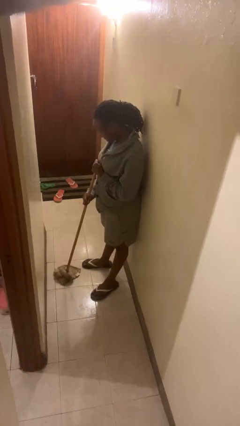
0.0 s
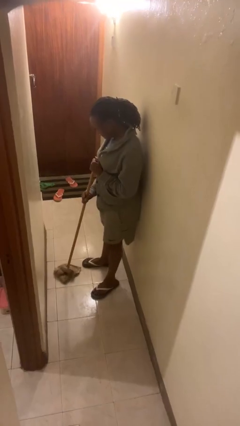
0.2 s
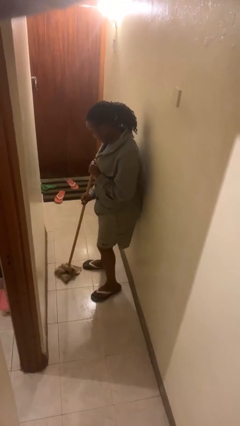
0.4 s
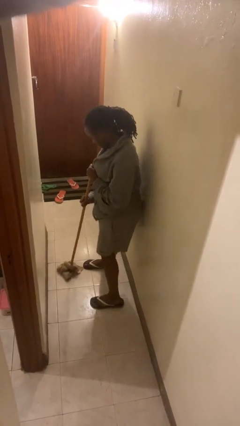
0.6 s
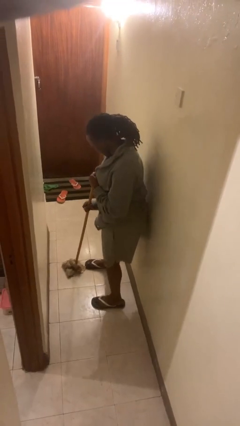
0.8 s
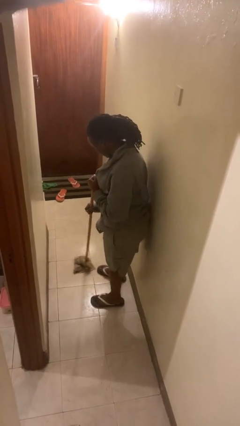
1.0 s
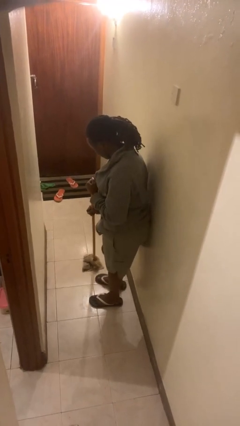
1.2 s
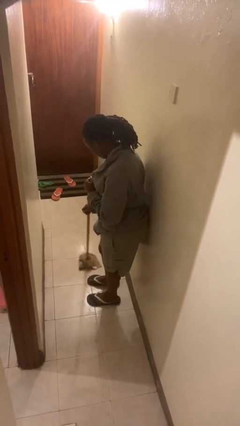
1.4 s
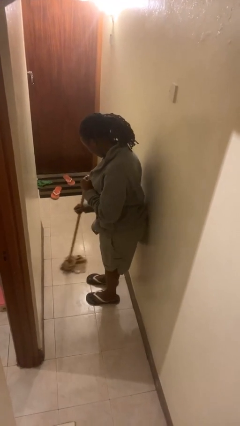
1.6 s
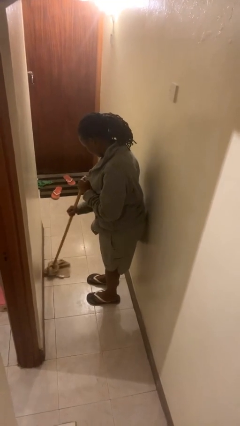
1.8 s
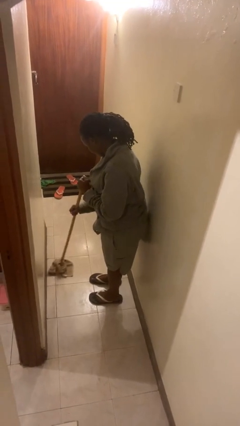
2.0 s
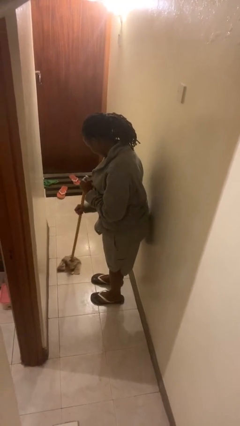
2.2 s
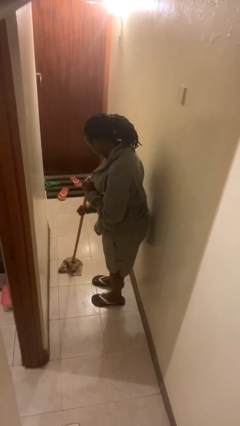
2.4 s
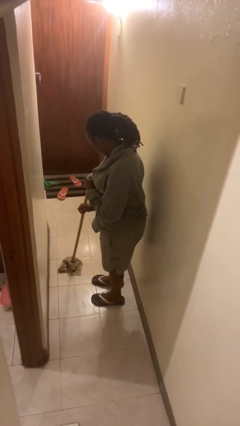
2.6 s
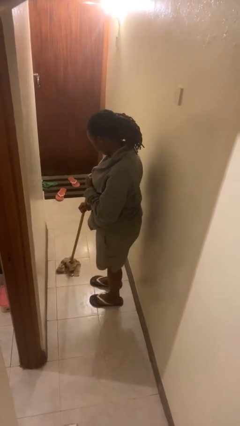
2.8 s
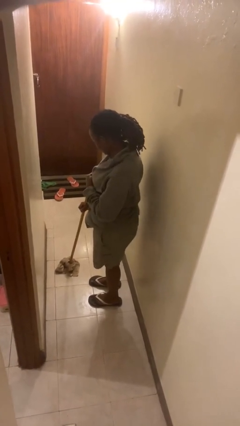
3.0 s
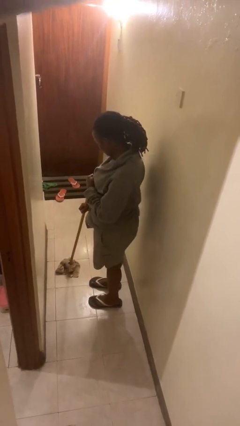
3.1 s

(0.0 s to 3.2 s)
person mops

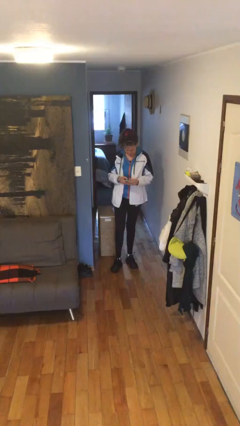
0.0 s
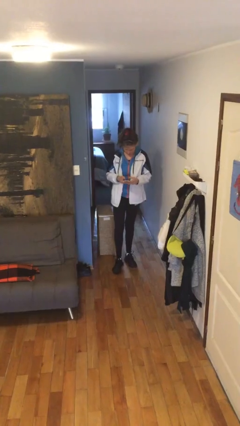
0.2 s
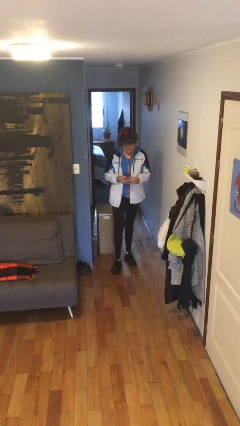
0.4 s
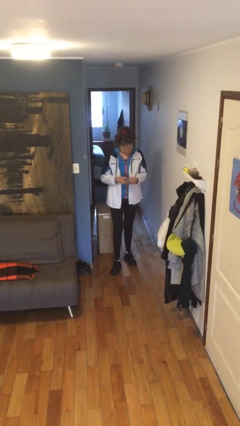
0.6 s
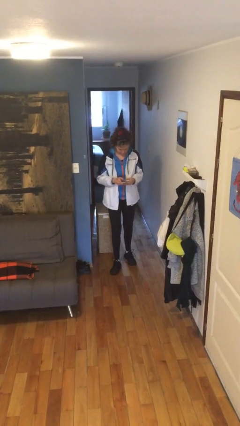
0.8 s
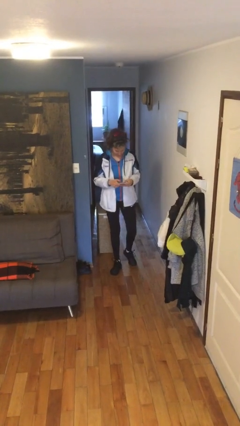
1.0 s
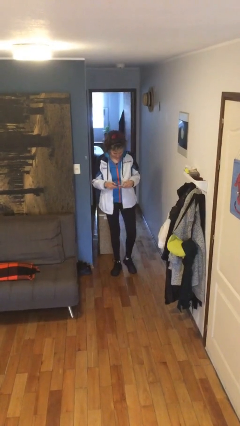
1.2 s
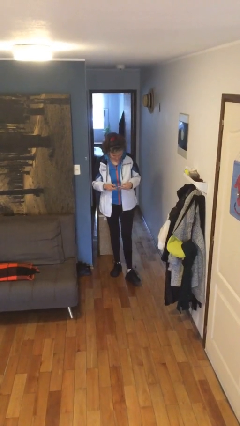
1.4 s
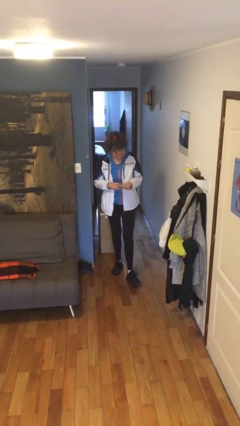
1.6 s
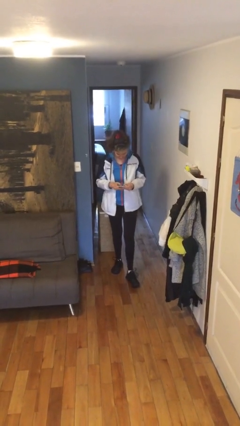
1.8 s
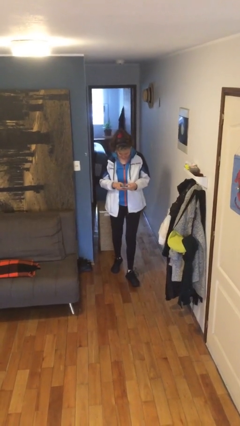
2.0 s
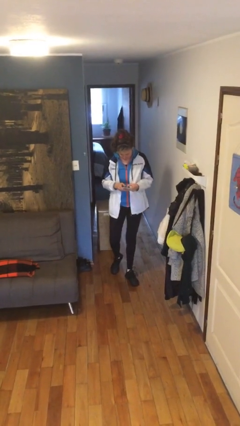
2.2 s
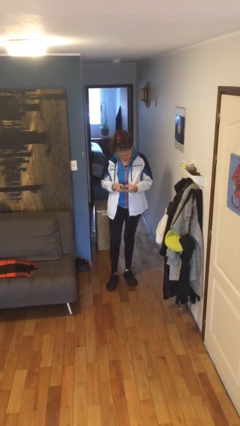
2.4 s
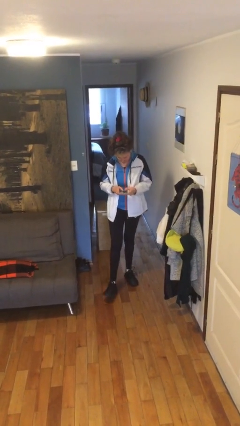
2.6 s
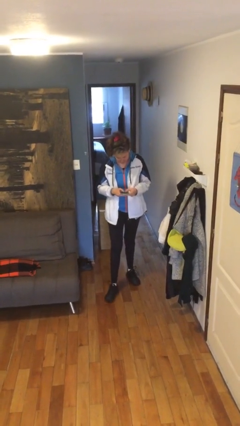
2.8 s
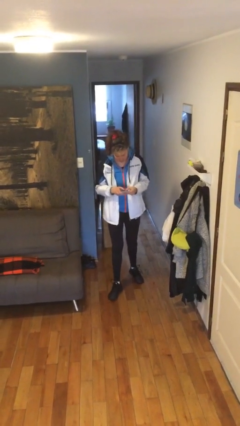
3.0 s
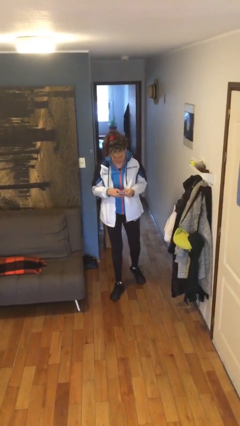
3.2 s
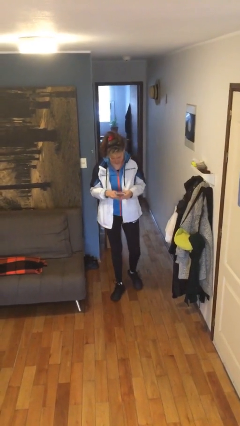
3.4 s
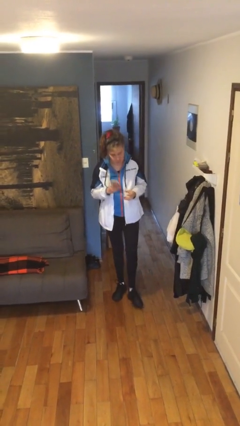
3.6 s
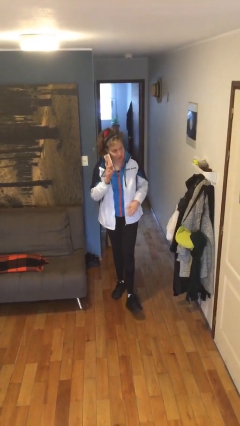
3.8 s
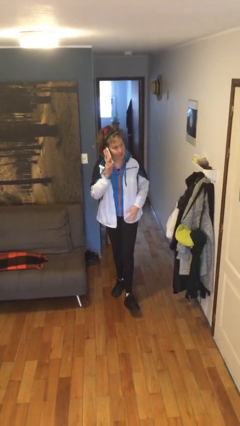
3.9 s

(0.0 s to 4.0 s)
person texts on phone

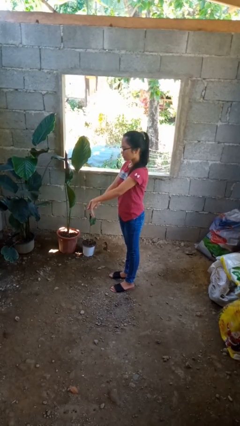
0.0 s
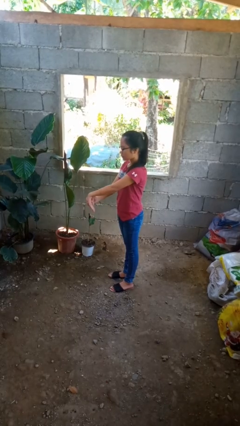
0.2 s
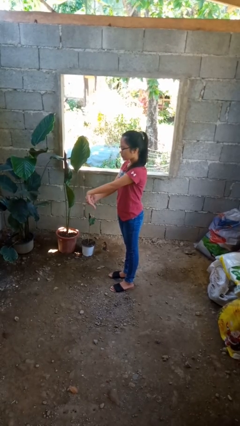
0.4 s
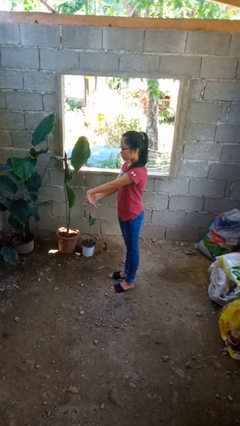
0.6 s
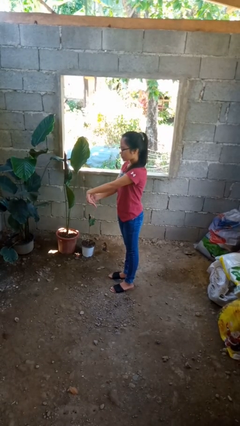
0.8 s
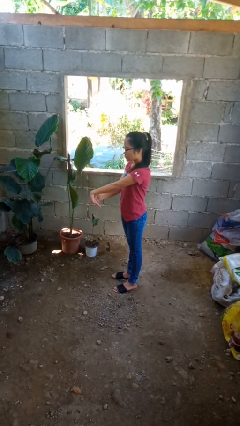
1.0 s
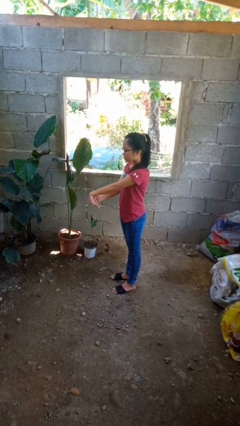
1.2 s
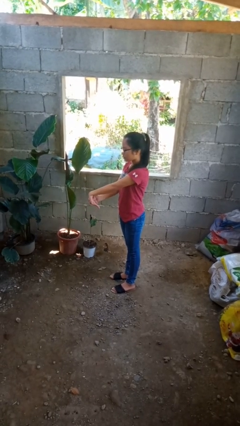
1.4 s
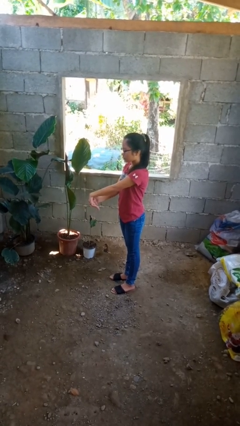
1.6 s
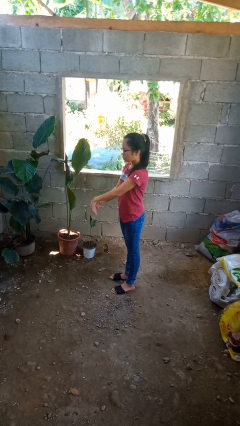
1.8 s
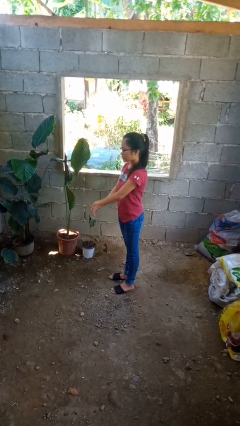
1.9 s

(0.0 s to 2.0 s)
person cracks knuckles

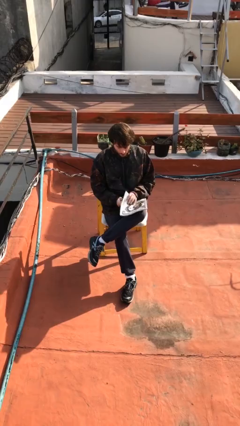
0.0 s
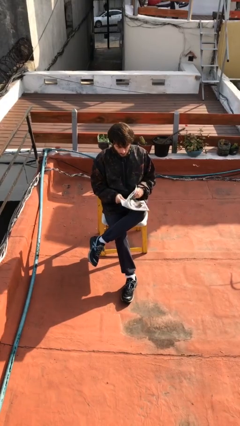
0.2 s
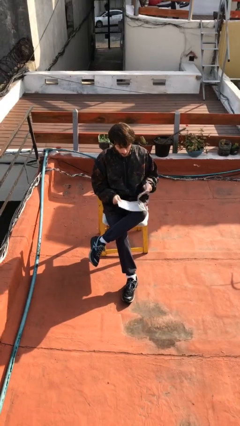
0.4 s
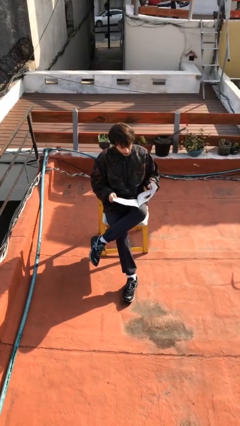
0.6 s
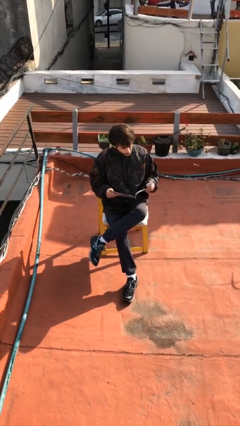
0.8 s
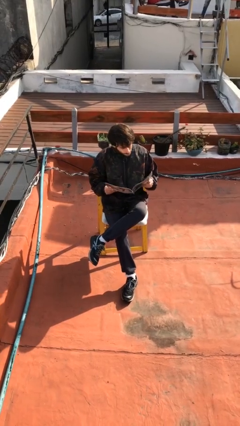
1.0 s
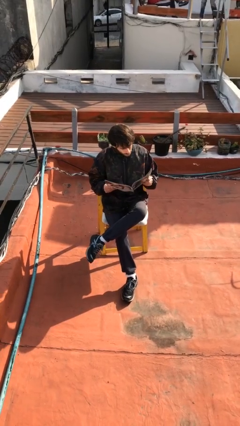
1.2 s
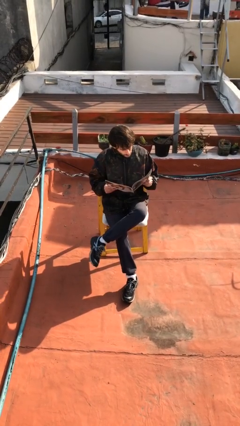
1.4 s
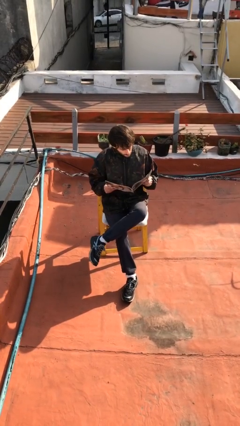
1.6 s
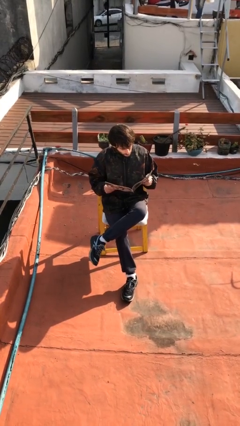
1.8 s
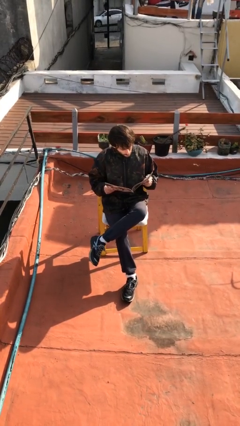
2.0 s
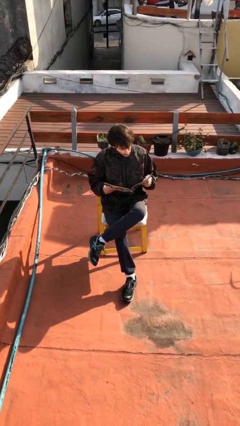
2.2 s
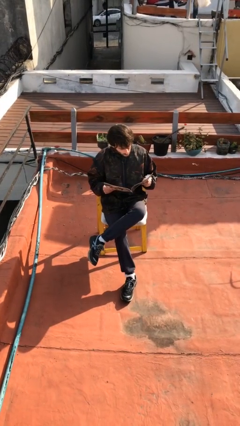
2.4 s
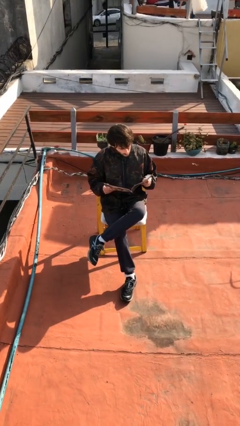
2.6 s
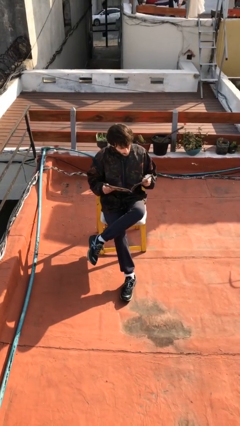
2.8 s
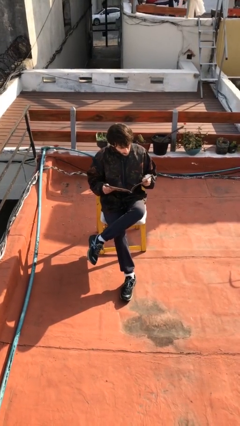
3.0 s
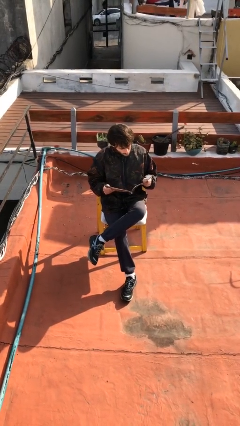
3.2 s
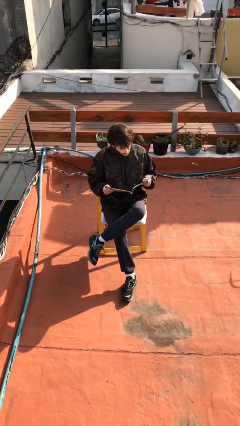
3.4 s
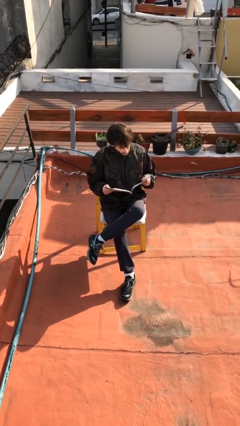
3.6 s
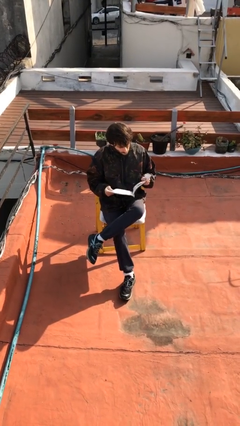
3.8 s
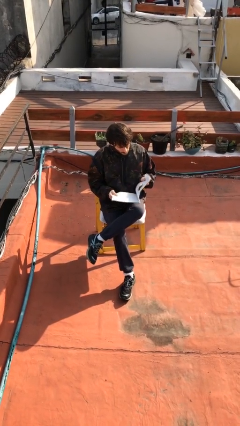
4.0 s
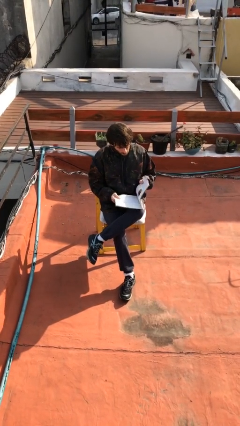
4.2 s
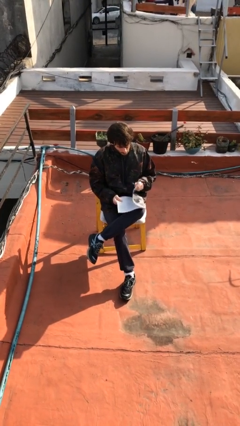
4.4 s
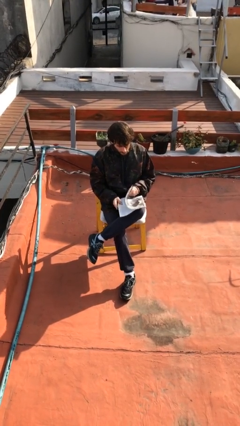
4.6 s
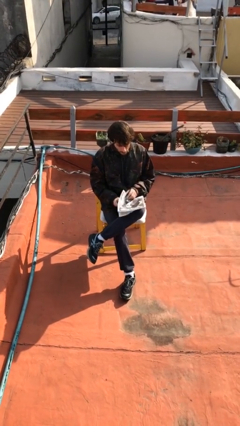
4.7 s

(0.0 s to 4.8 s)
person reads magazine

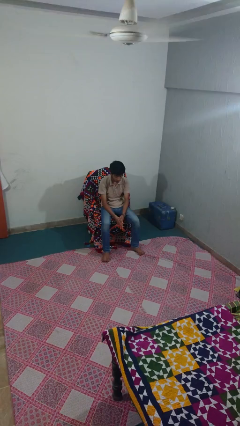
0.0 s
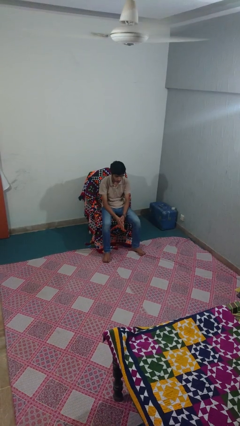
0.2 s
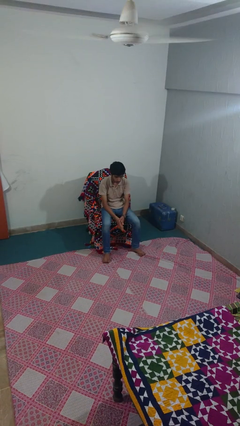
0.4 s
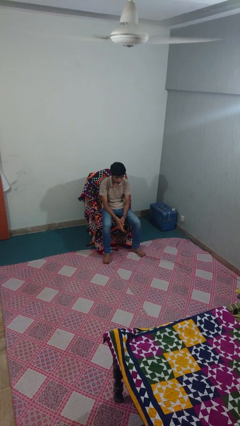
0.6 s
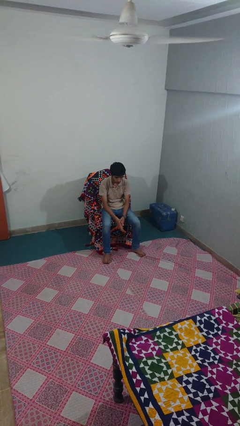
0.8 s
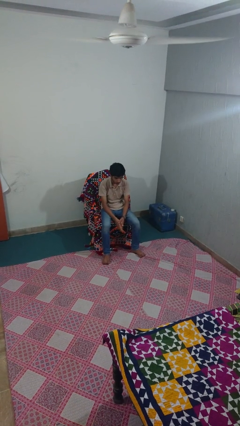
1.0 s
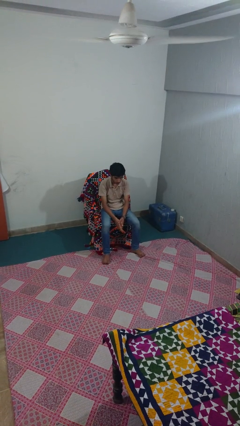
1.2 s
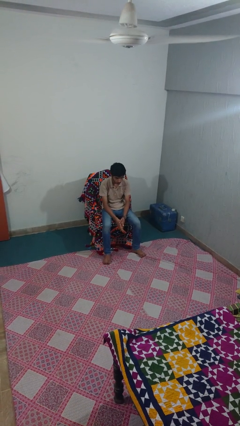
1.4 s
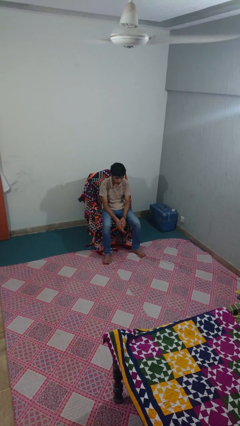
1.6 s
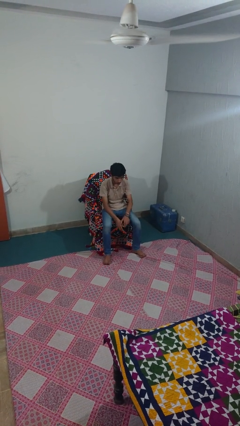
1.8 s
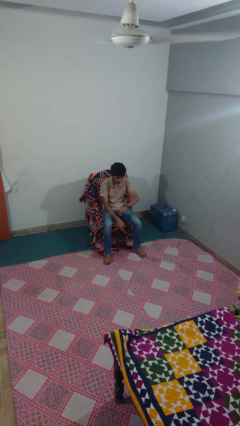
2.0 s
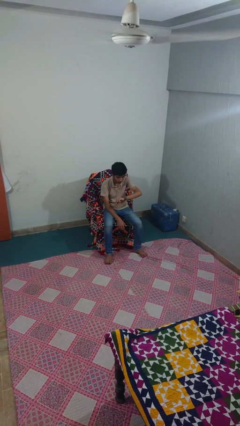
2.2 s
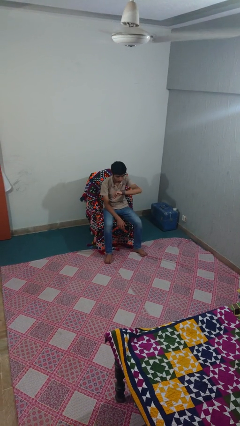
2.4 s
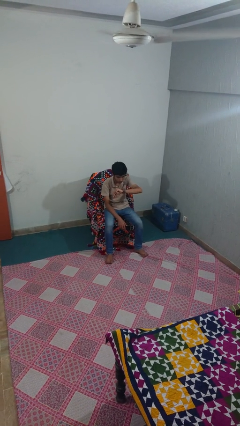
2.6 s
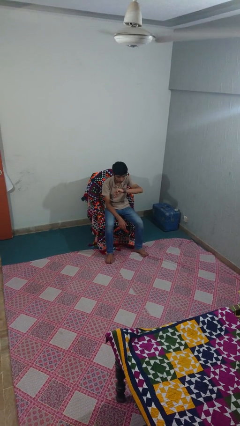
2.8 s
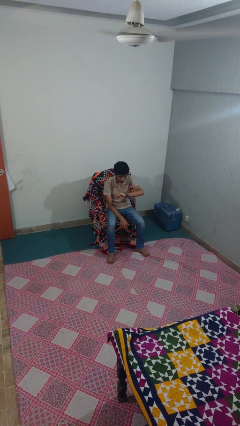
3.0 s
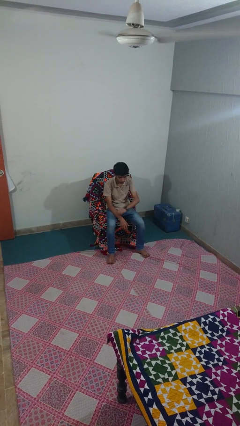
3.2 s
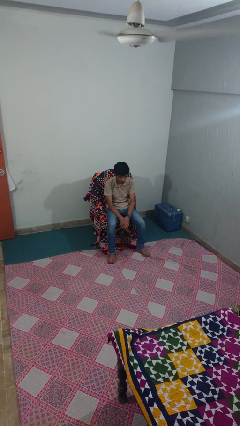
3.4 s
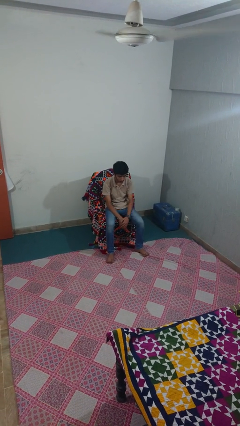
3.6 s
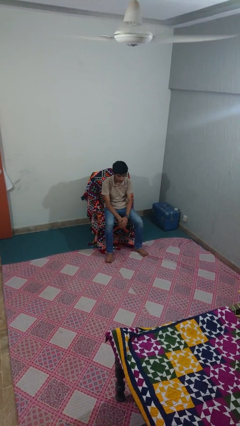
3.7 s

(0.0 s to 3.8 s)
person looks at wristwatch
